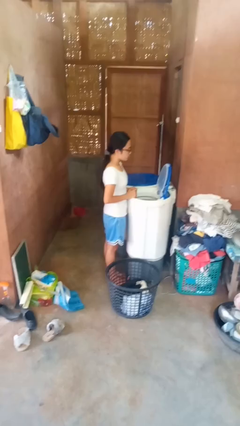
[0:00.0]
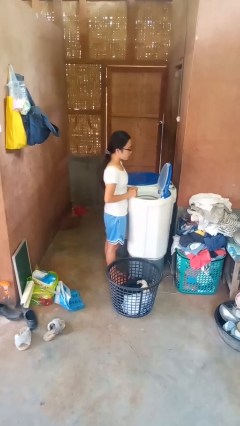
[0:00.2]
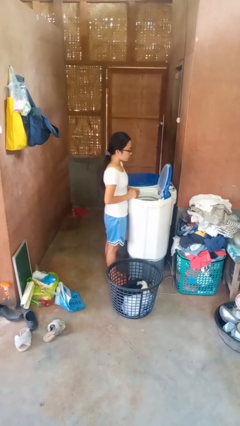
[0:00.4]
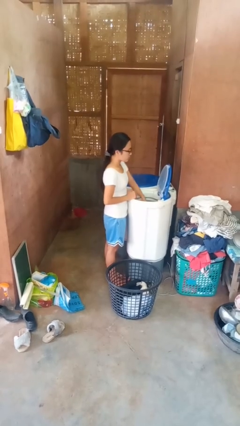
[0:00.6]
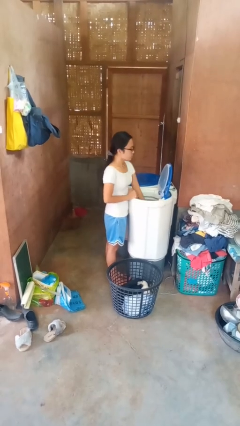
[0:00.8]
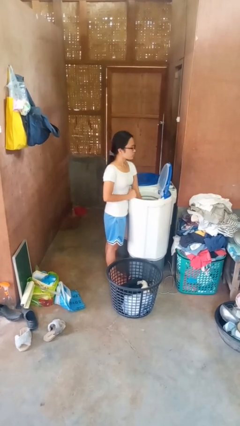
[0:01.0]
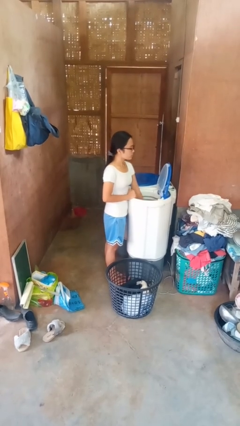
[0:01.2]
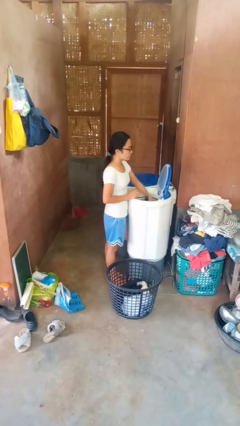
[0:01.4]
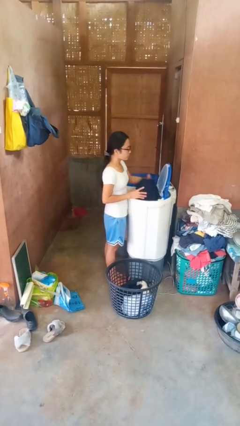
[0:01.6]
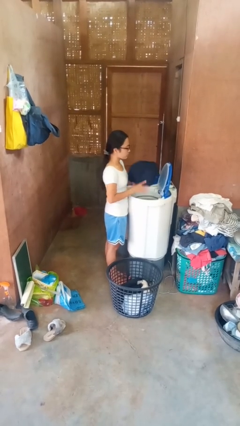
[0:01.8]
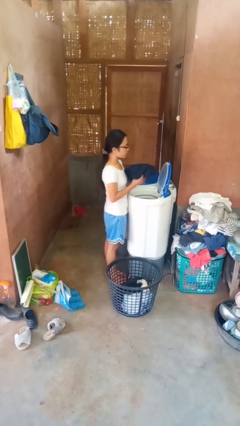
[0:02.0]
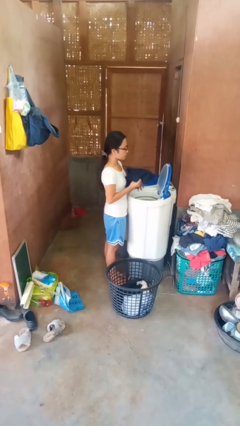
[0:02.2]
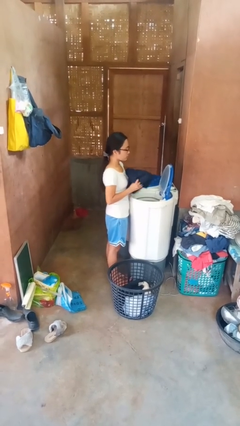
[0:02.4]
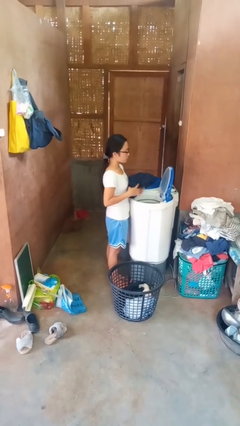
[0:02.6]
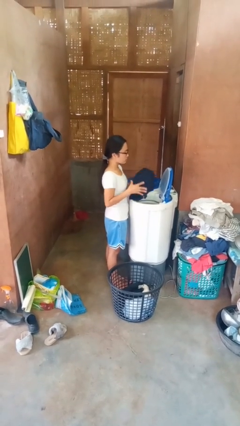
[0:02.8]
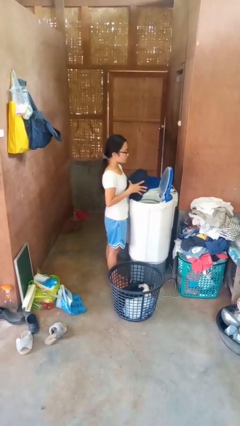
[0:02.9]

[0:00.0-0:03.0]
person unloads dryer

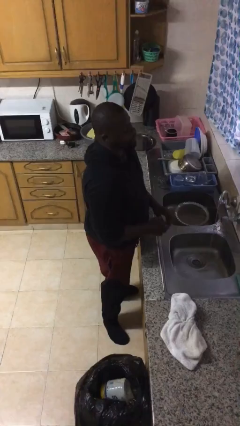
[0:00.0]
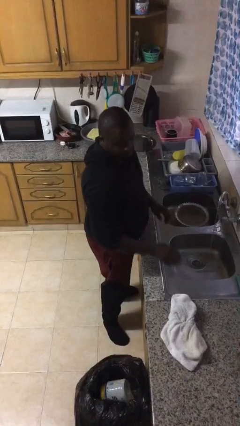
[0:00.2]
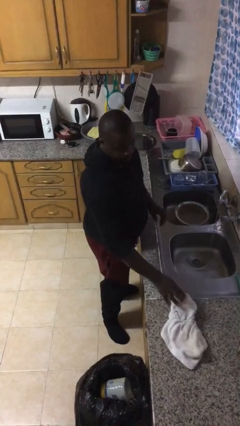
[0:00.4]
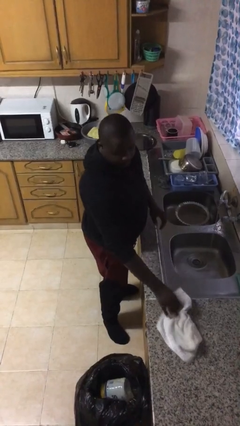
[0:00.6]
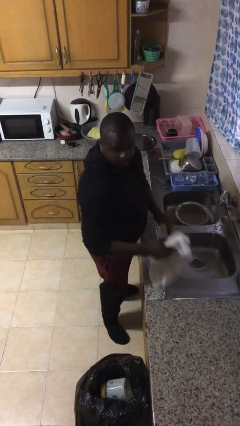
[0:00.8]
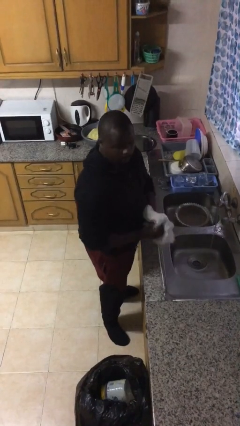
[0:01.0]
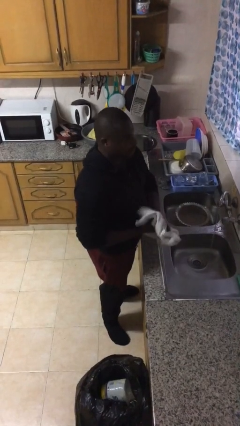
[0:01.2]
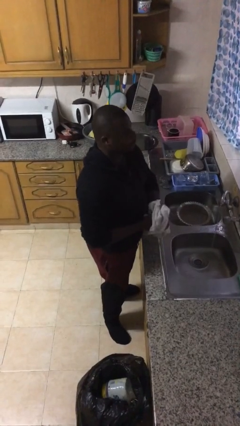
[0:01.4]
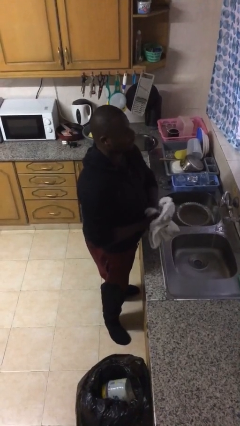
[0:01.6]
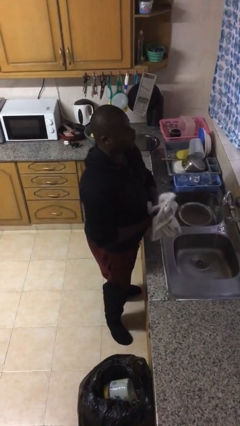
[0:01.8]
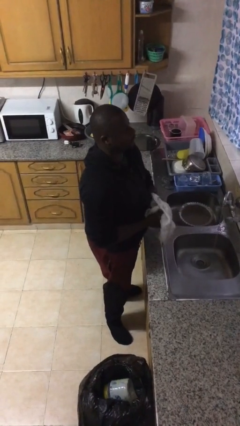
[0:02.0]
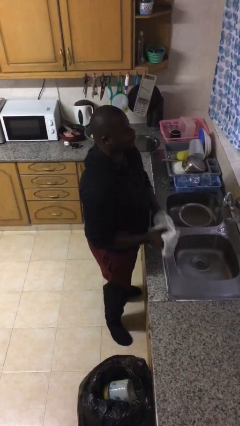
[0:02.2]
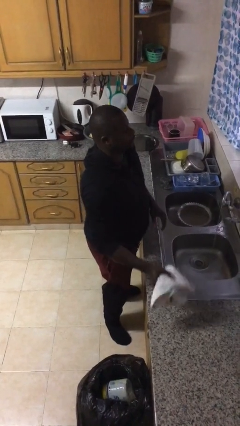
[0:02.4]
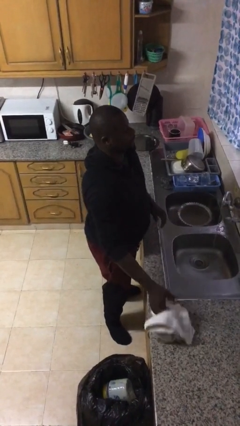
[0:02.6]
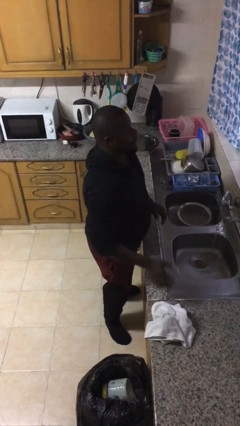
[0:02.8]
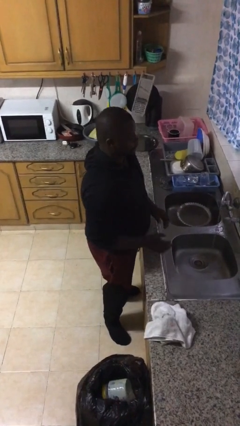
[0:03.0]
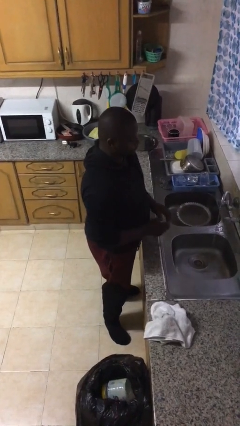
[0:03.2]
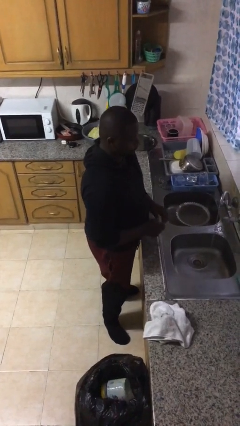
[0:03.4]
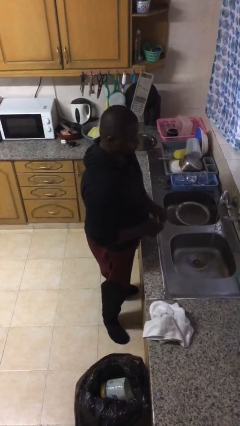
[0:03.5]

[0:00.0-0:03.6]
person dries hands with towel

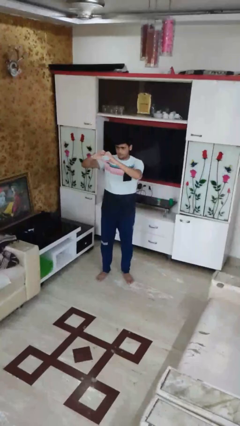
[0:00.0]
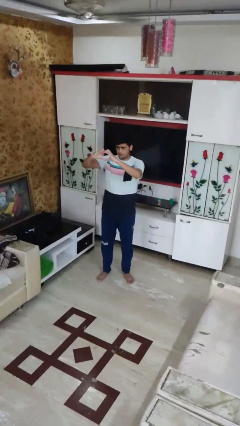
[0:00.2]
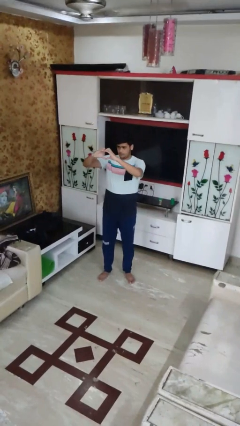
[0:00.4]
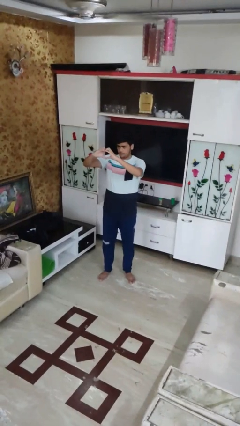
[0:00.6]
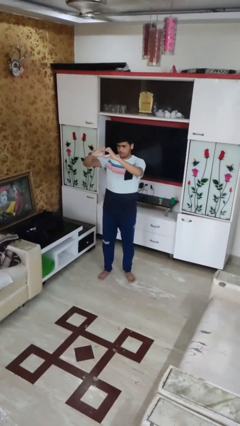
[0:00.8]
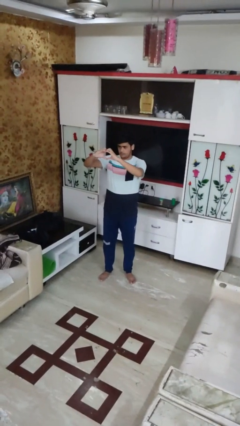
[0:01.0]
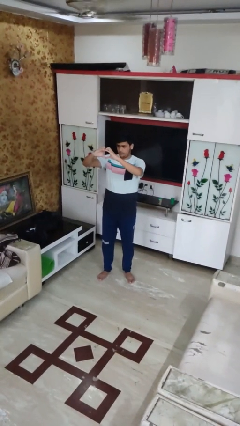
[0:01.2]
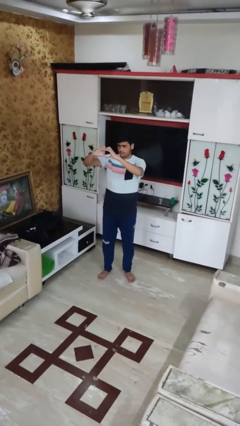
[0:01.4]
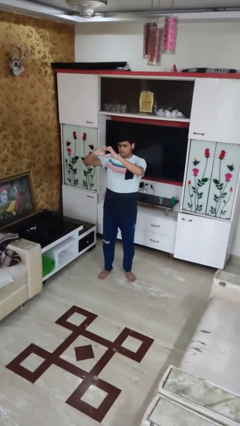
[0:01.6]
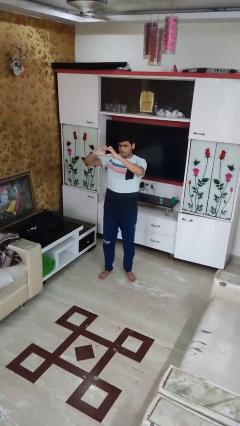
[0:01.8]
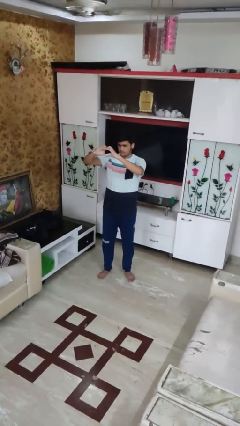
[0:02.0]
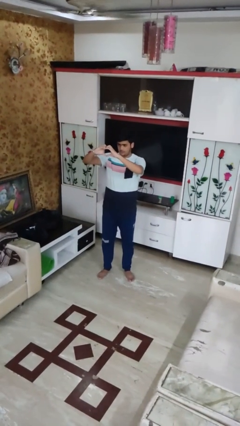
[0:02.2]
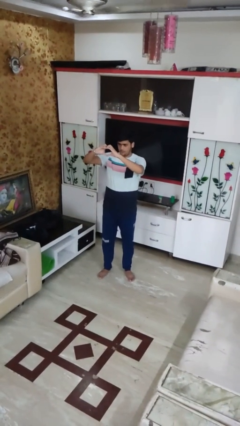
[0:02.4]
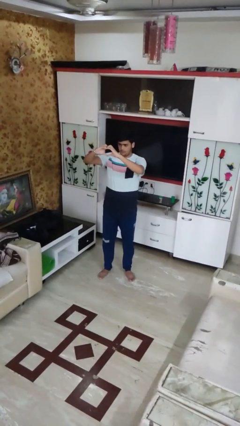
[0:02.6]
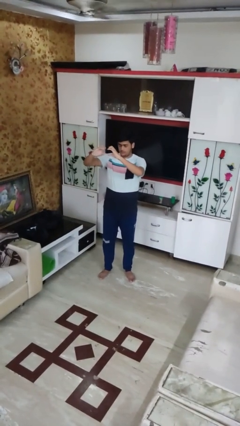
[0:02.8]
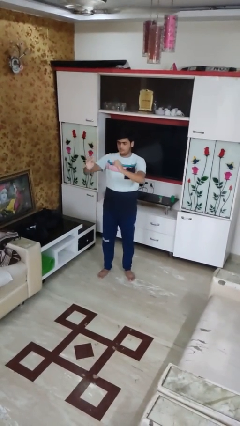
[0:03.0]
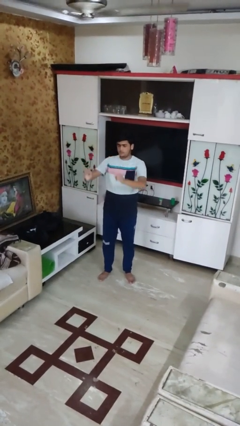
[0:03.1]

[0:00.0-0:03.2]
person gestures heart

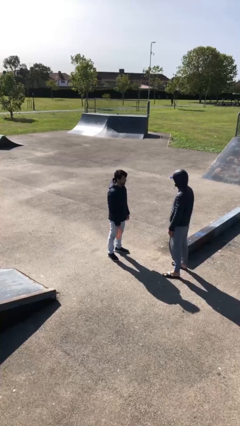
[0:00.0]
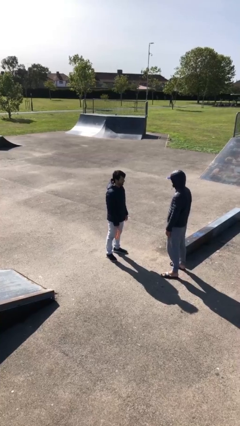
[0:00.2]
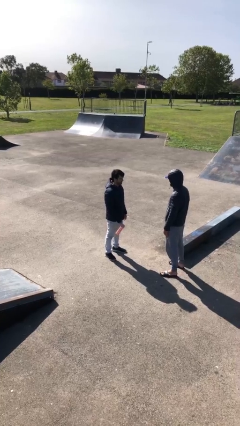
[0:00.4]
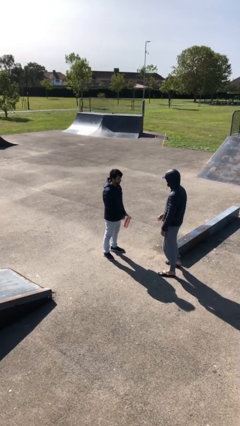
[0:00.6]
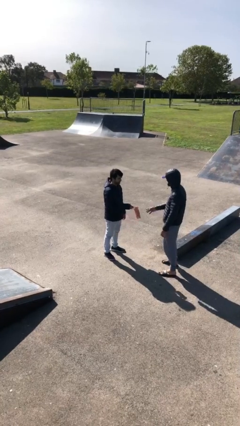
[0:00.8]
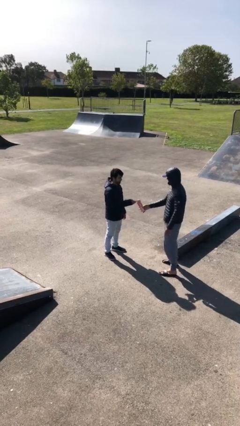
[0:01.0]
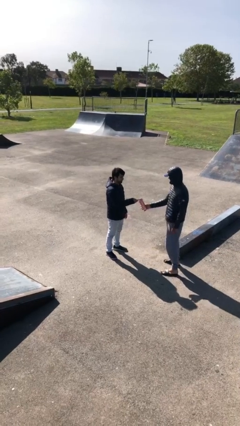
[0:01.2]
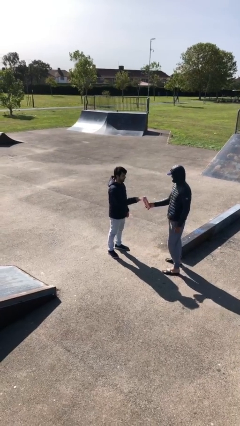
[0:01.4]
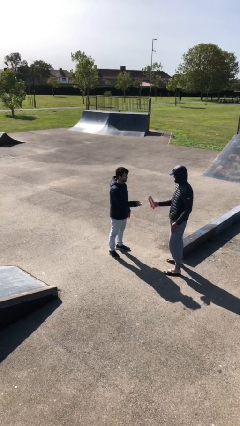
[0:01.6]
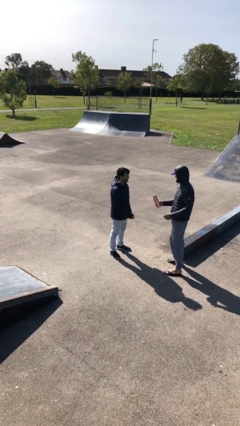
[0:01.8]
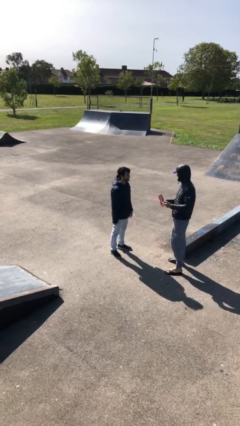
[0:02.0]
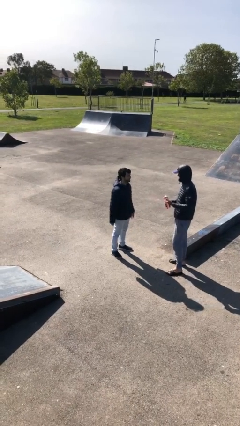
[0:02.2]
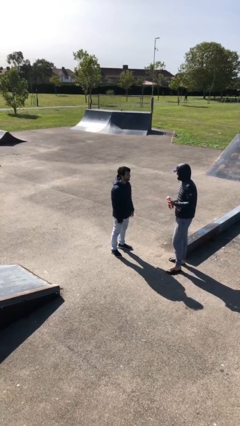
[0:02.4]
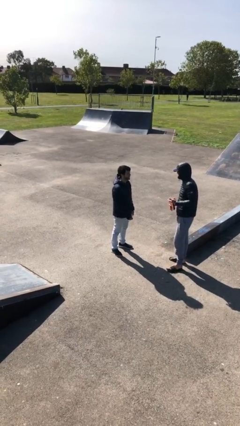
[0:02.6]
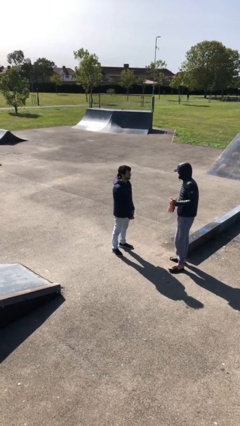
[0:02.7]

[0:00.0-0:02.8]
person transfers object to person

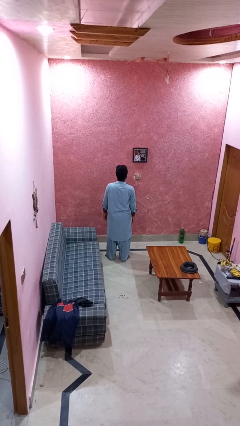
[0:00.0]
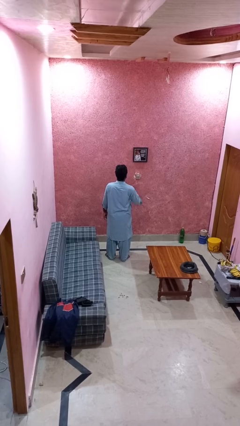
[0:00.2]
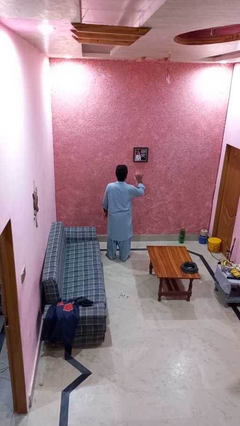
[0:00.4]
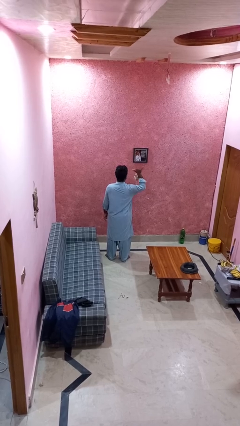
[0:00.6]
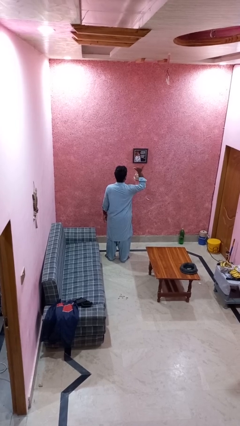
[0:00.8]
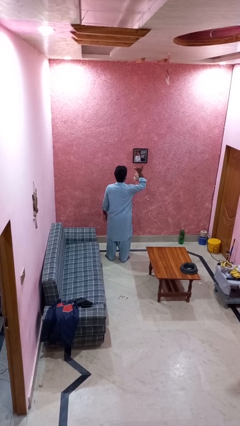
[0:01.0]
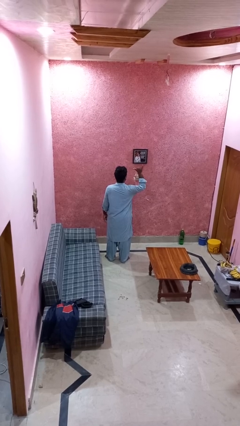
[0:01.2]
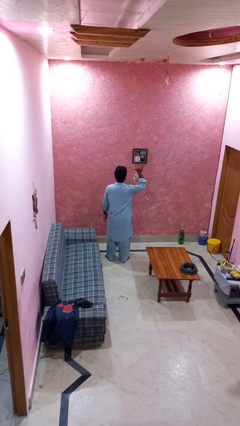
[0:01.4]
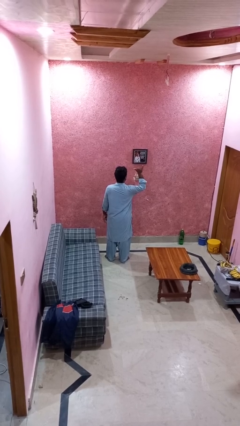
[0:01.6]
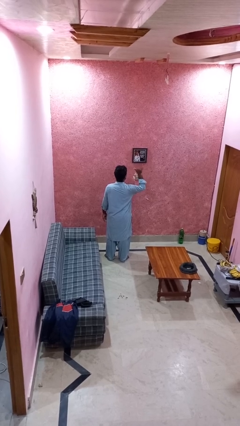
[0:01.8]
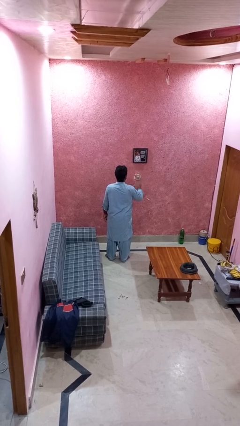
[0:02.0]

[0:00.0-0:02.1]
person gestures hang loose

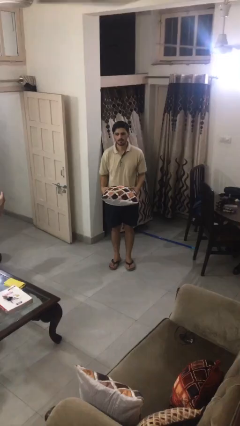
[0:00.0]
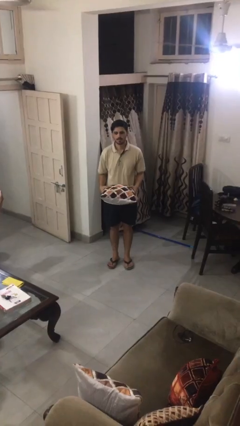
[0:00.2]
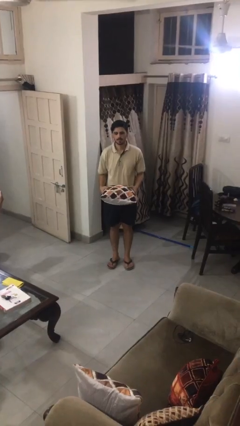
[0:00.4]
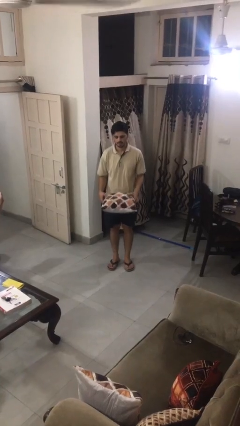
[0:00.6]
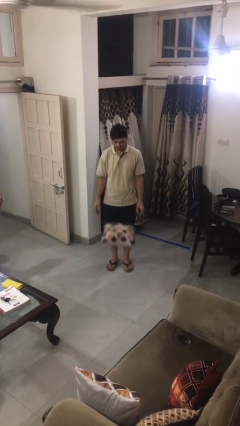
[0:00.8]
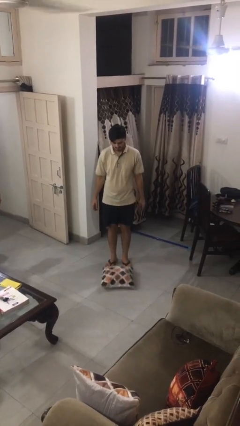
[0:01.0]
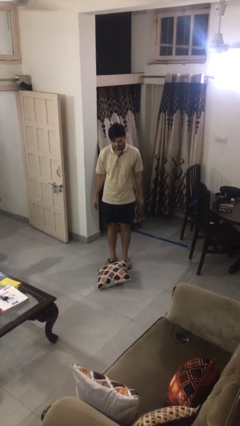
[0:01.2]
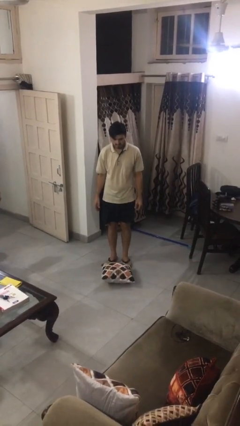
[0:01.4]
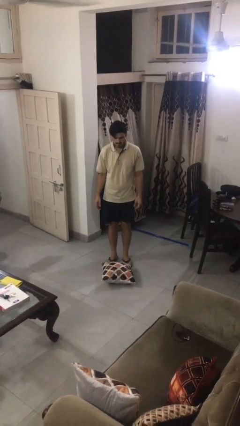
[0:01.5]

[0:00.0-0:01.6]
person drops object

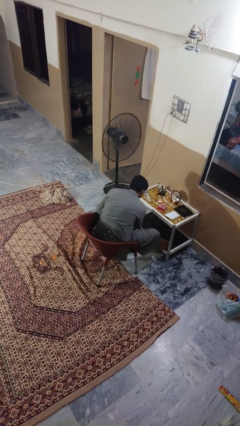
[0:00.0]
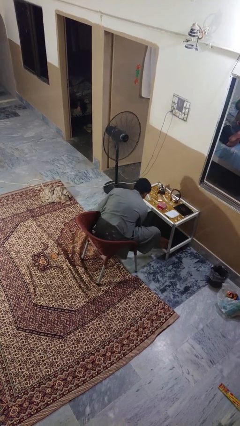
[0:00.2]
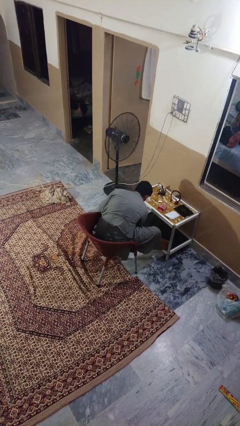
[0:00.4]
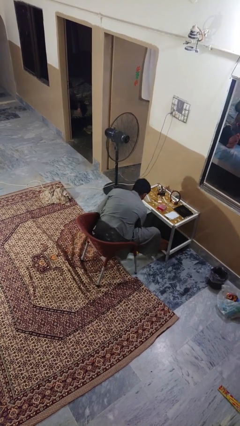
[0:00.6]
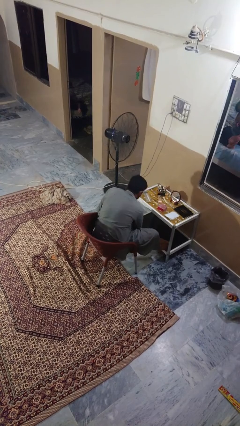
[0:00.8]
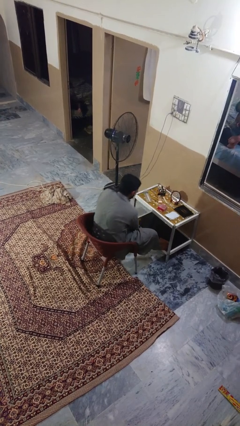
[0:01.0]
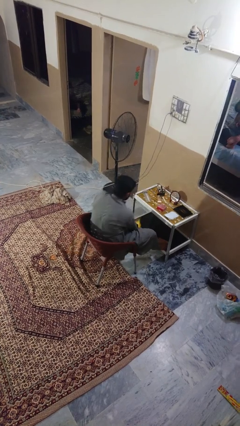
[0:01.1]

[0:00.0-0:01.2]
person picks up object from floor
